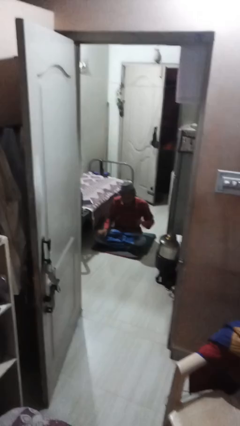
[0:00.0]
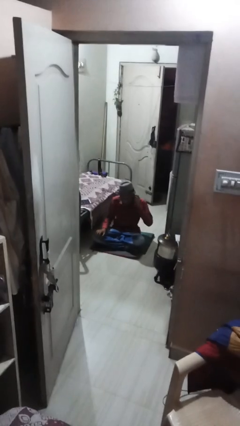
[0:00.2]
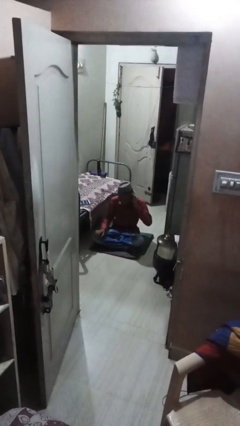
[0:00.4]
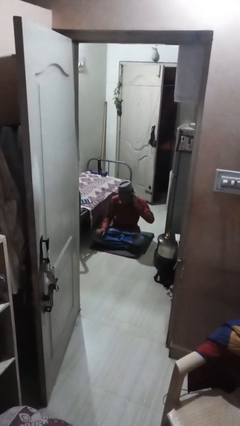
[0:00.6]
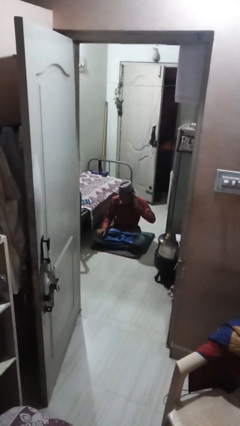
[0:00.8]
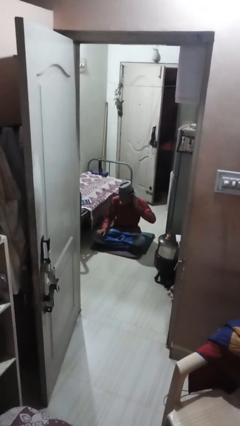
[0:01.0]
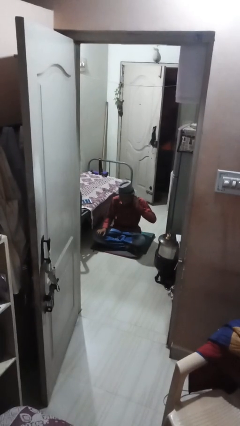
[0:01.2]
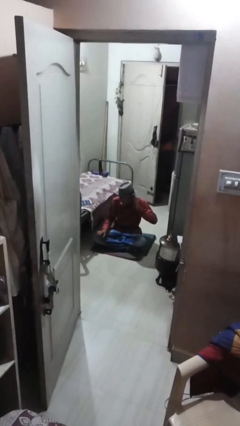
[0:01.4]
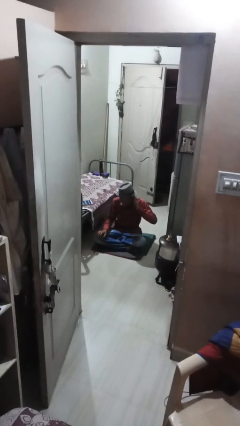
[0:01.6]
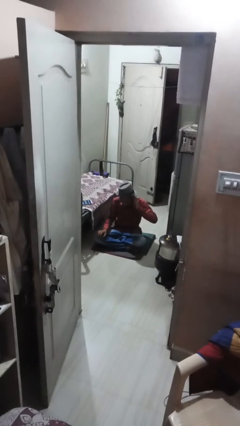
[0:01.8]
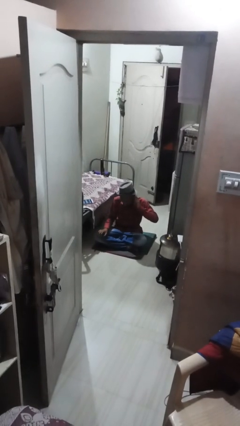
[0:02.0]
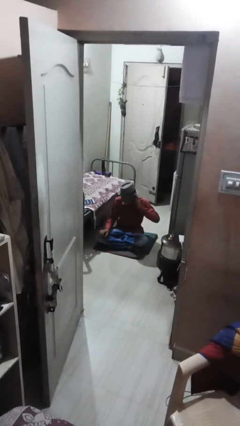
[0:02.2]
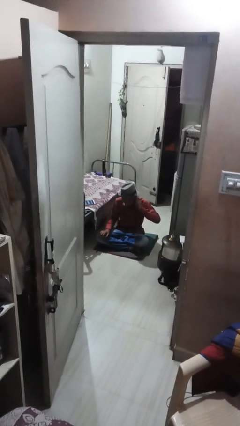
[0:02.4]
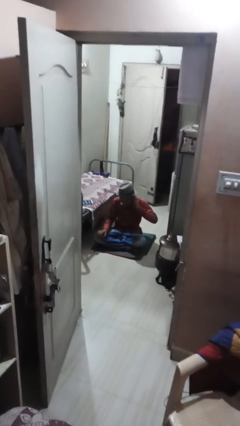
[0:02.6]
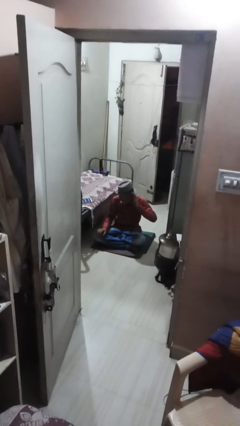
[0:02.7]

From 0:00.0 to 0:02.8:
person touches earlobe

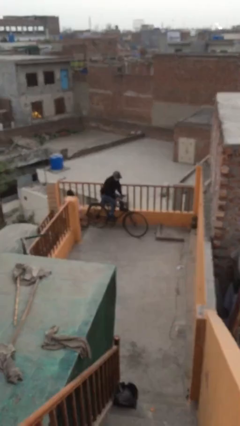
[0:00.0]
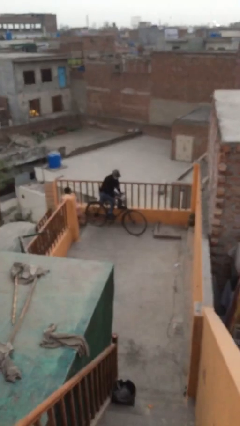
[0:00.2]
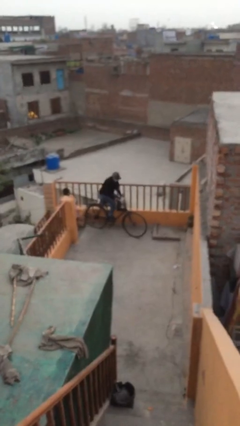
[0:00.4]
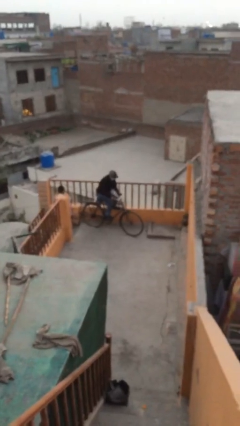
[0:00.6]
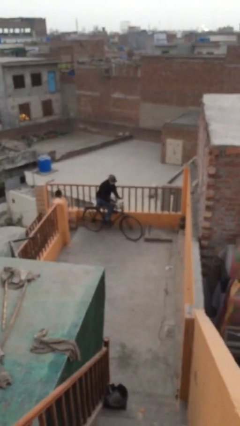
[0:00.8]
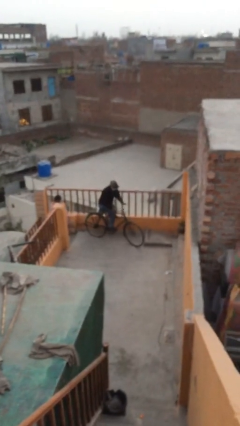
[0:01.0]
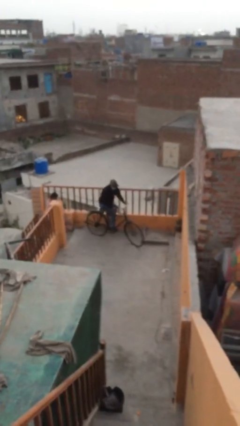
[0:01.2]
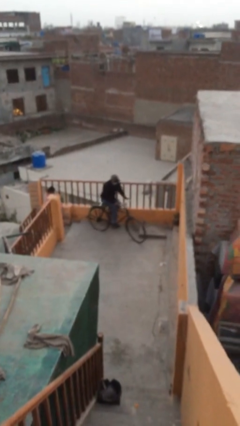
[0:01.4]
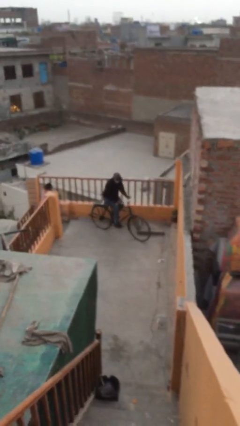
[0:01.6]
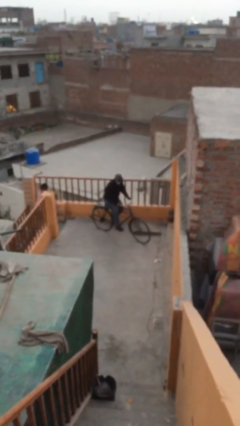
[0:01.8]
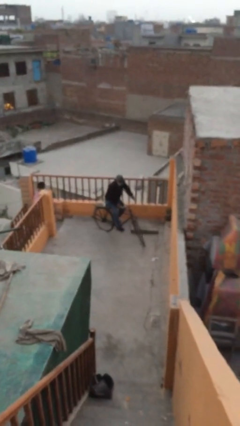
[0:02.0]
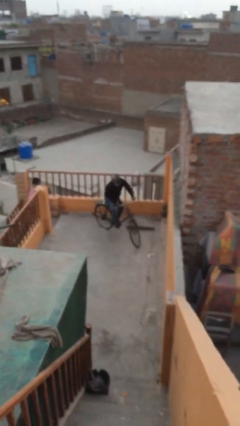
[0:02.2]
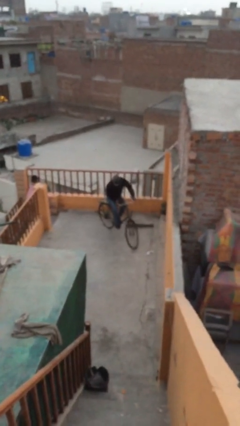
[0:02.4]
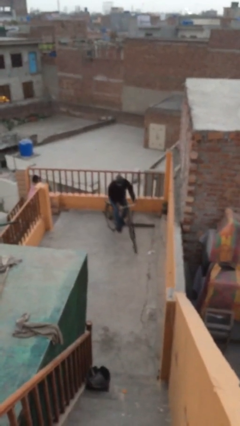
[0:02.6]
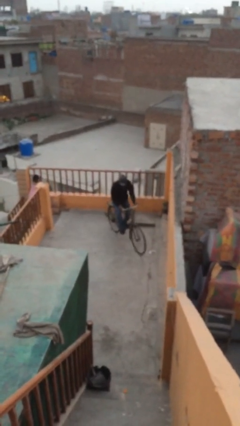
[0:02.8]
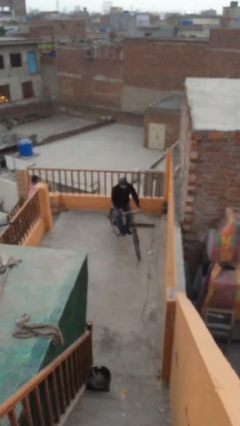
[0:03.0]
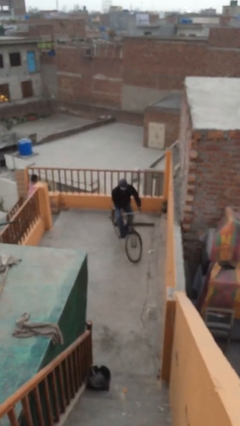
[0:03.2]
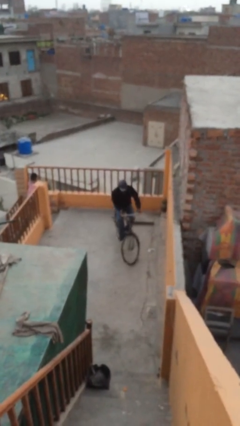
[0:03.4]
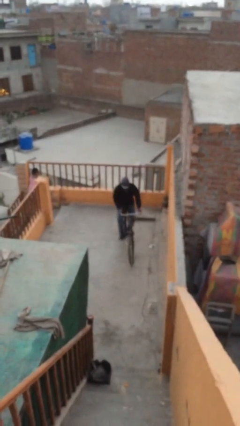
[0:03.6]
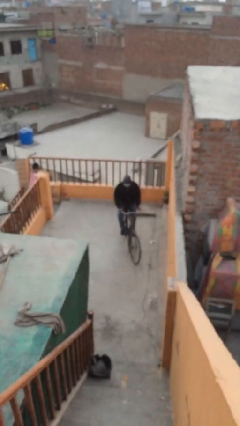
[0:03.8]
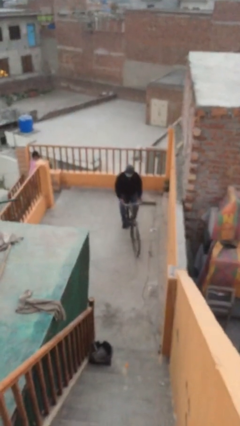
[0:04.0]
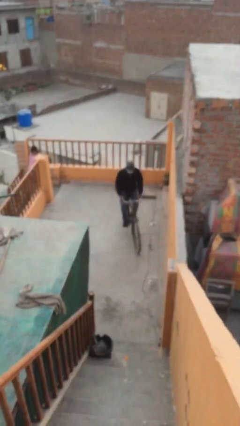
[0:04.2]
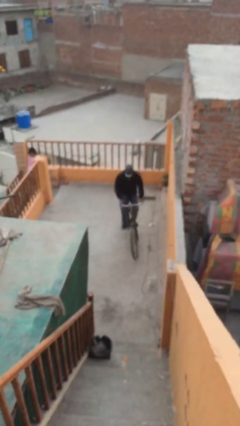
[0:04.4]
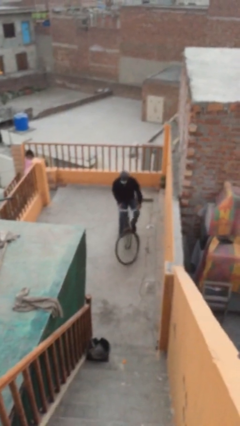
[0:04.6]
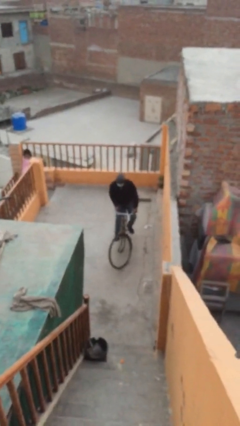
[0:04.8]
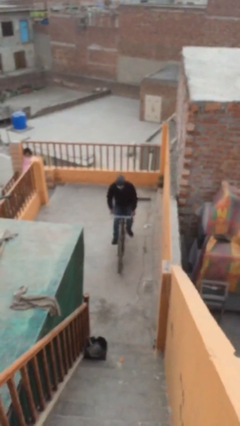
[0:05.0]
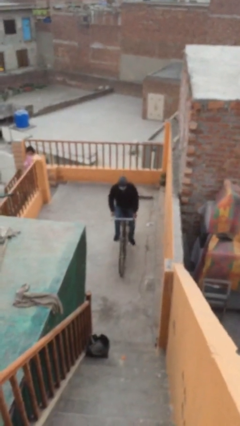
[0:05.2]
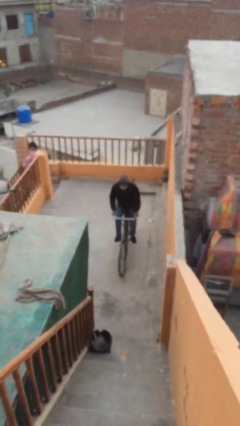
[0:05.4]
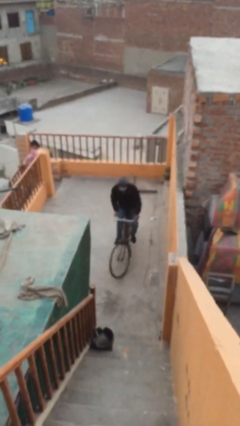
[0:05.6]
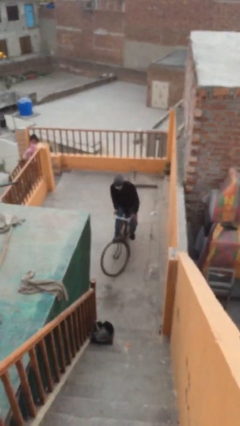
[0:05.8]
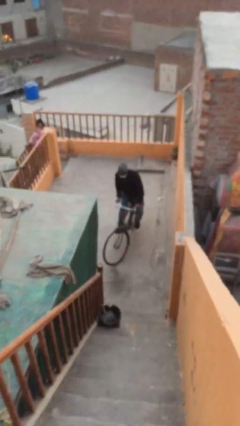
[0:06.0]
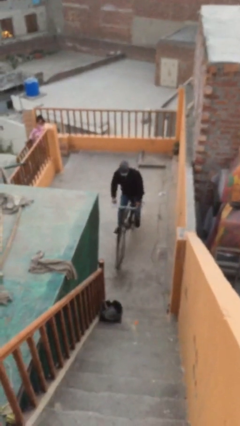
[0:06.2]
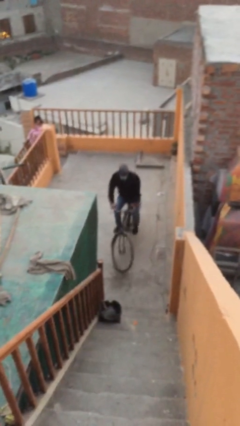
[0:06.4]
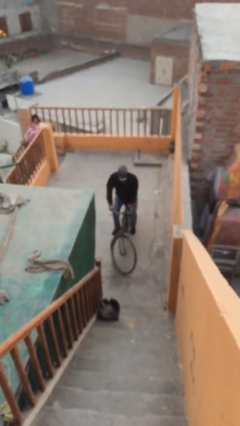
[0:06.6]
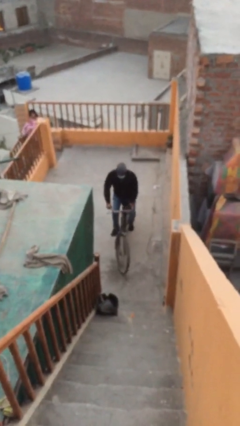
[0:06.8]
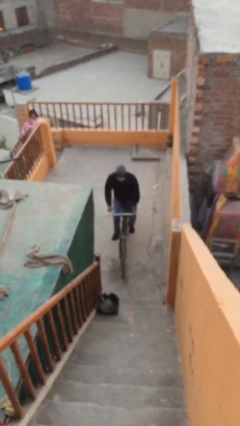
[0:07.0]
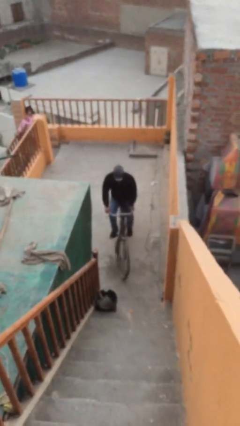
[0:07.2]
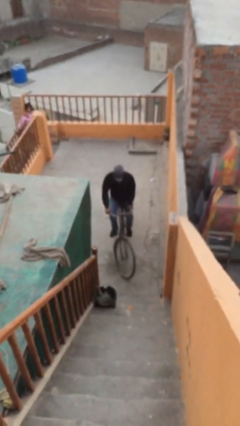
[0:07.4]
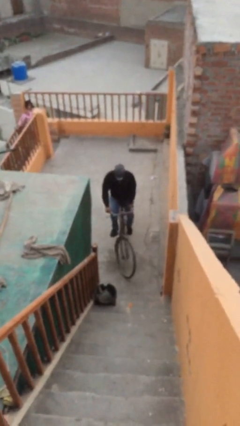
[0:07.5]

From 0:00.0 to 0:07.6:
person rides bicycle

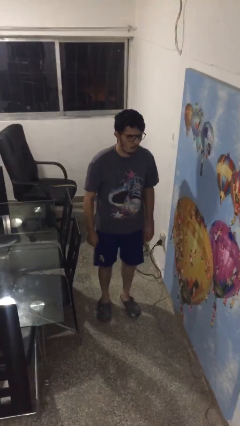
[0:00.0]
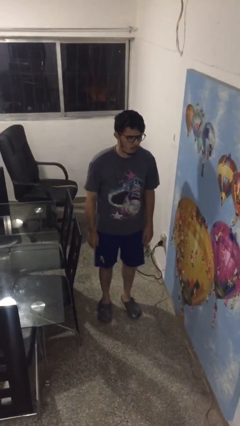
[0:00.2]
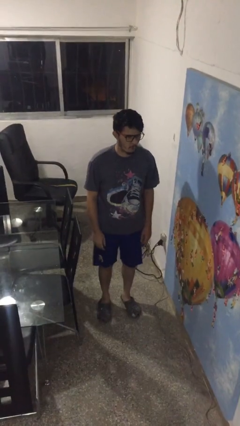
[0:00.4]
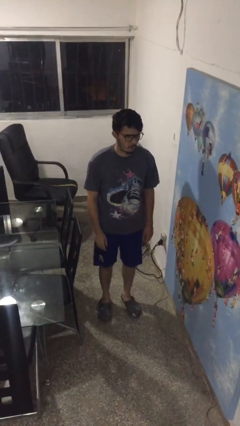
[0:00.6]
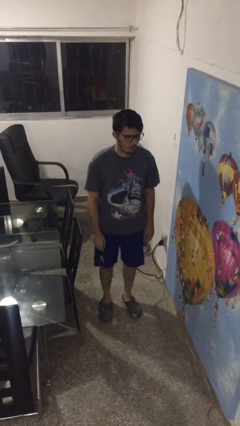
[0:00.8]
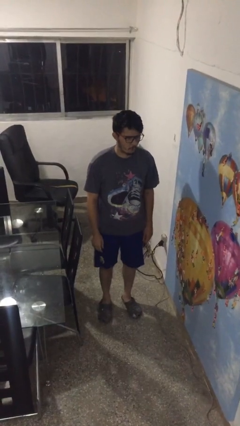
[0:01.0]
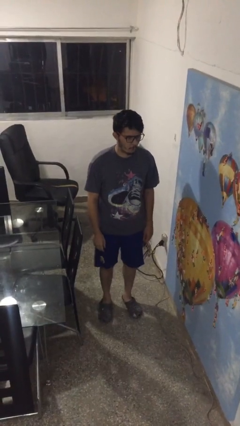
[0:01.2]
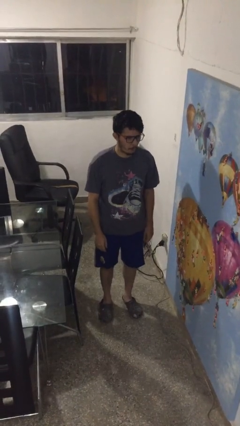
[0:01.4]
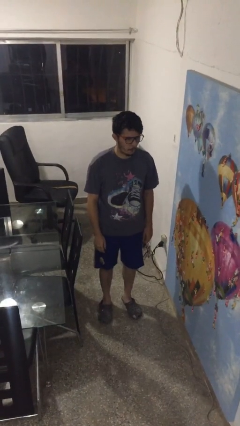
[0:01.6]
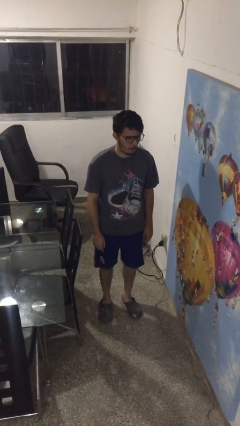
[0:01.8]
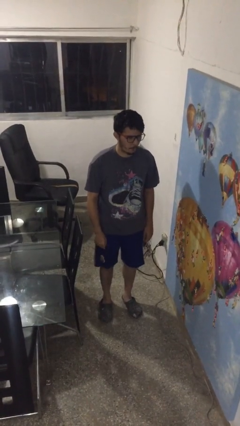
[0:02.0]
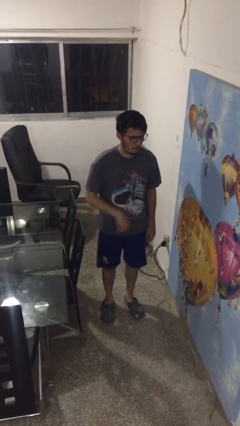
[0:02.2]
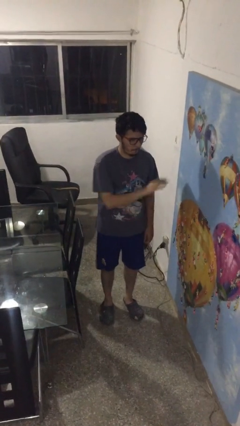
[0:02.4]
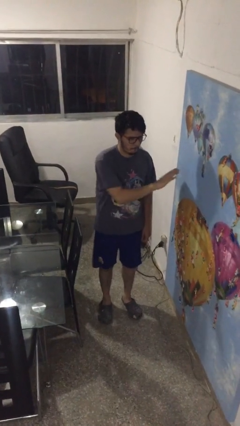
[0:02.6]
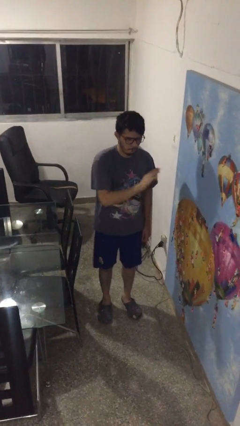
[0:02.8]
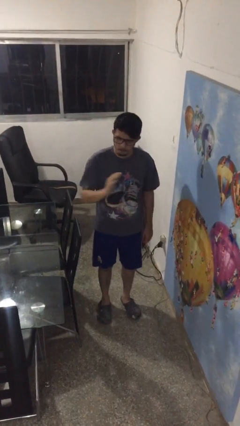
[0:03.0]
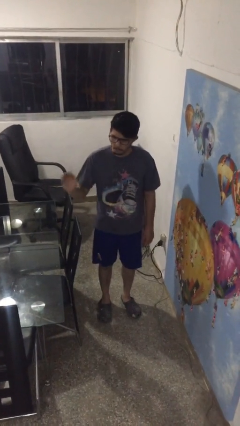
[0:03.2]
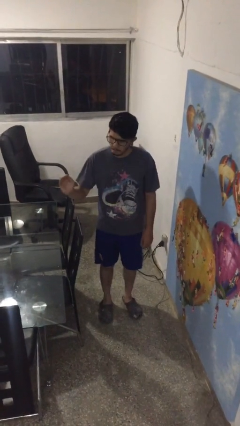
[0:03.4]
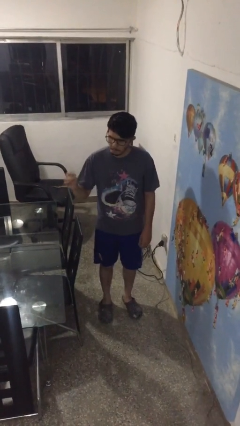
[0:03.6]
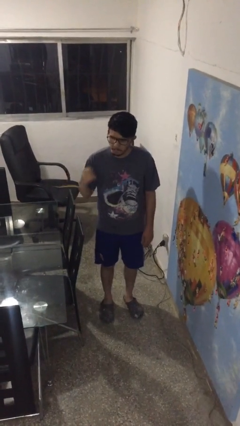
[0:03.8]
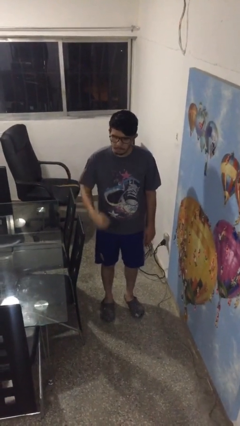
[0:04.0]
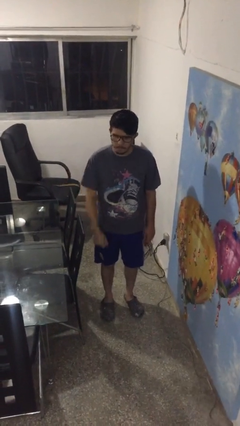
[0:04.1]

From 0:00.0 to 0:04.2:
person gestures swipe right

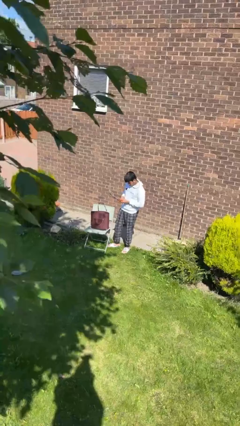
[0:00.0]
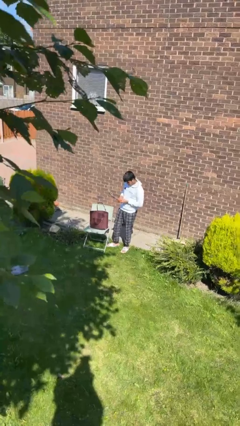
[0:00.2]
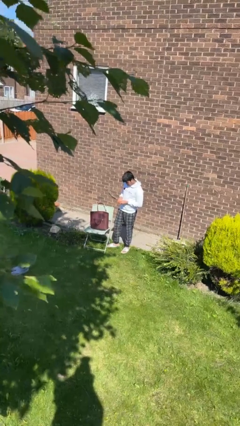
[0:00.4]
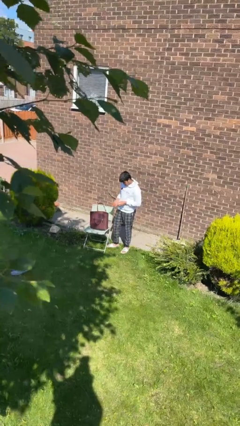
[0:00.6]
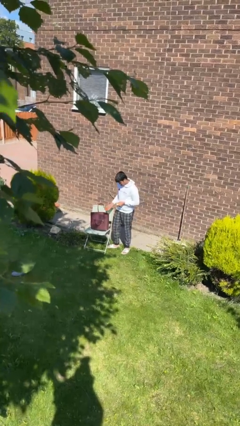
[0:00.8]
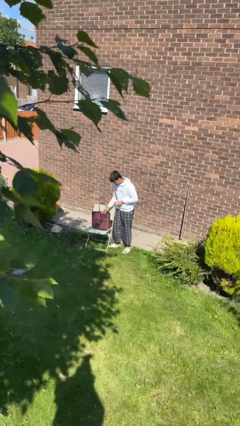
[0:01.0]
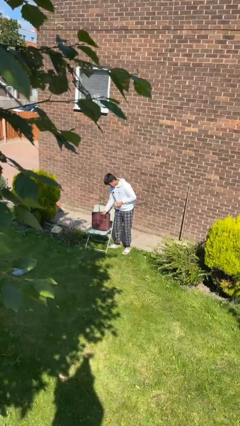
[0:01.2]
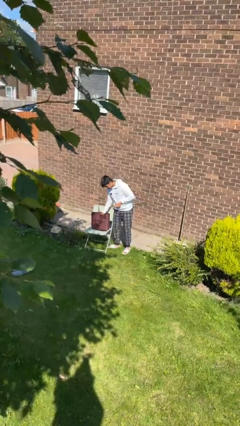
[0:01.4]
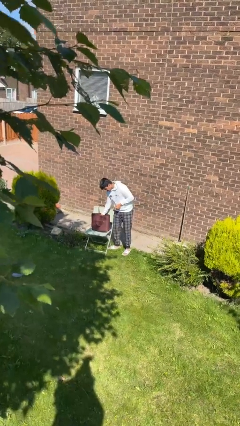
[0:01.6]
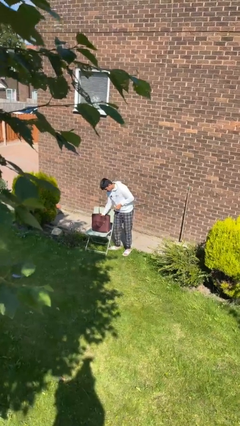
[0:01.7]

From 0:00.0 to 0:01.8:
person puts object into purse

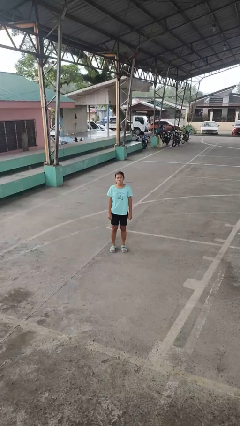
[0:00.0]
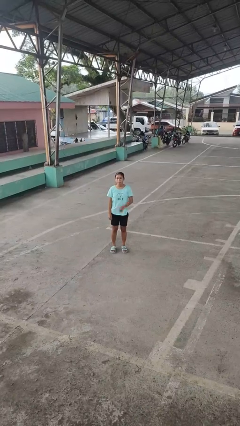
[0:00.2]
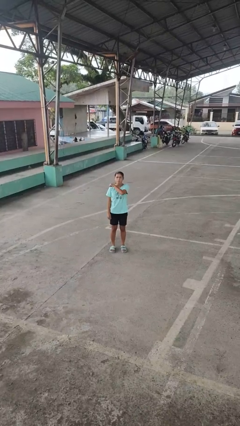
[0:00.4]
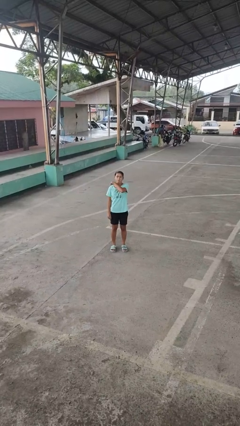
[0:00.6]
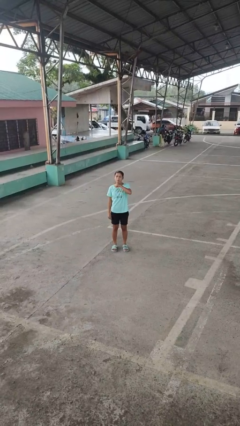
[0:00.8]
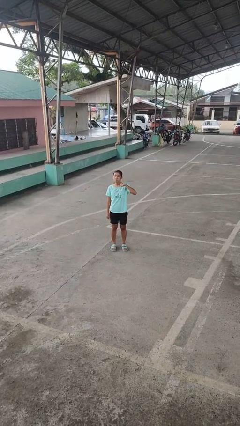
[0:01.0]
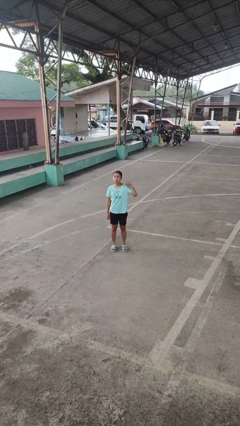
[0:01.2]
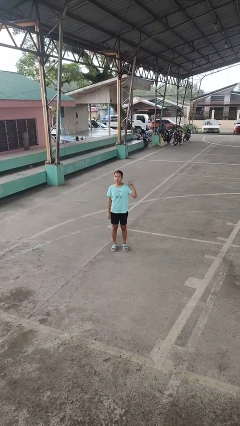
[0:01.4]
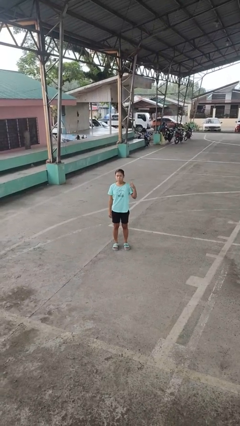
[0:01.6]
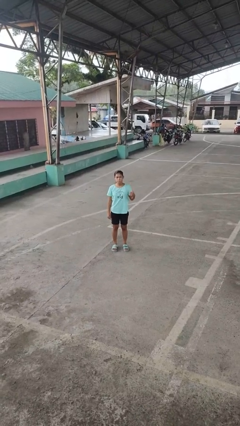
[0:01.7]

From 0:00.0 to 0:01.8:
person gestures cut
